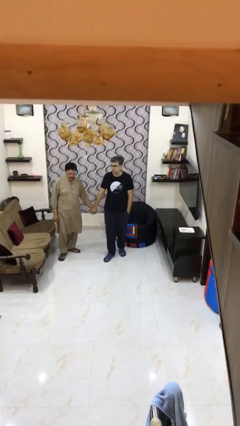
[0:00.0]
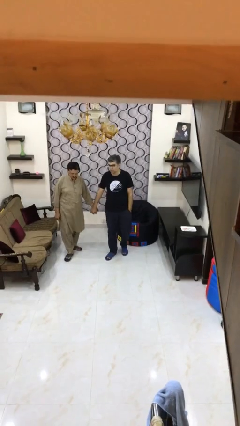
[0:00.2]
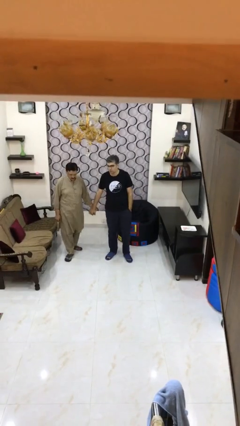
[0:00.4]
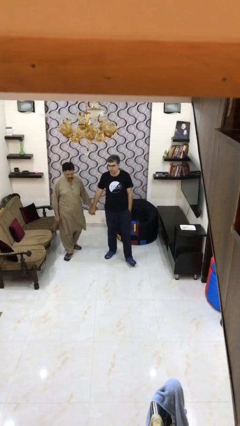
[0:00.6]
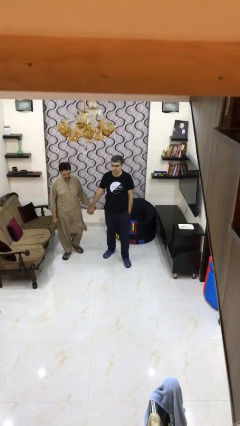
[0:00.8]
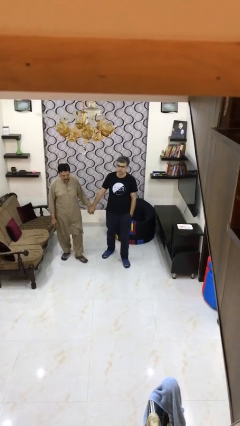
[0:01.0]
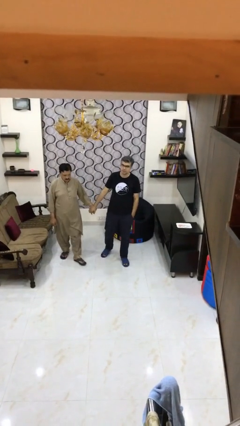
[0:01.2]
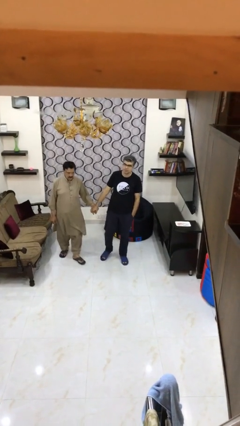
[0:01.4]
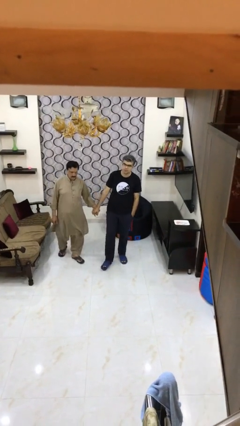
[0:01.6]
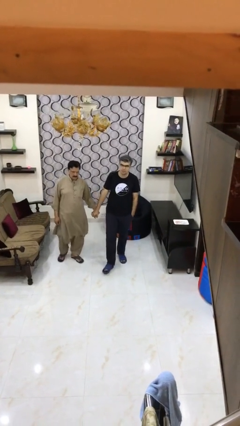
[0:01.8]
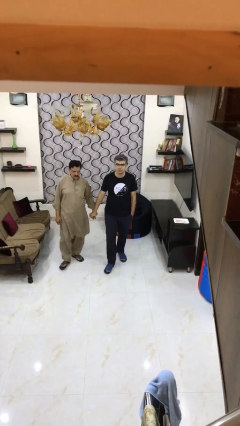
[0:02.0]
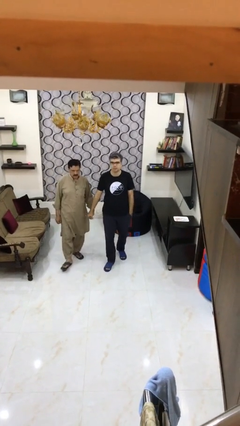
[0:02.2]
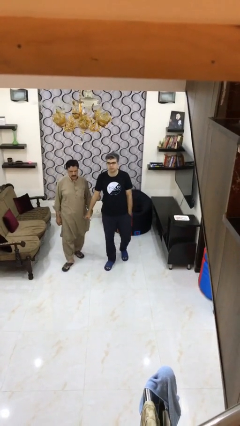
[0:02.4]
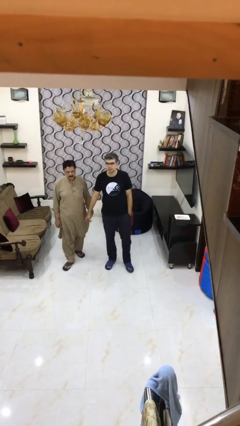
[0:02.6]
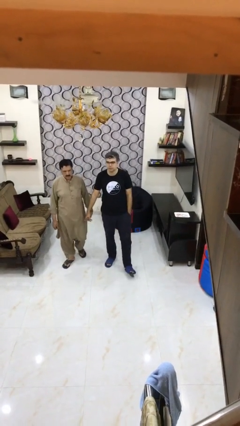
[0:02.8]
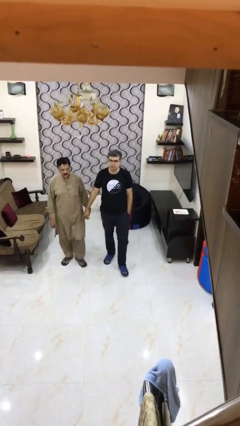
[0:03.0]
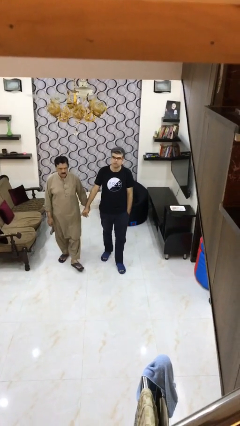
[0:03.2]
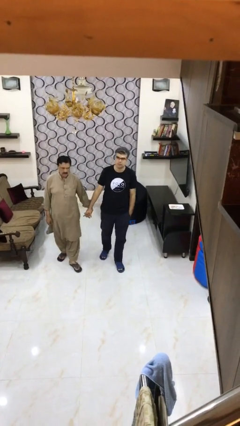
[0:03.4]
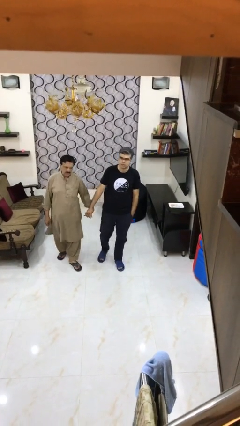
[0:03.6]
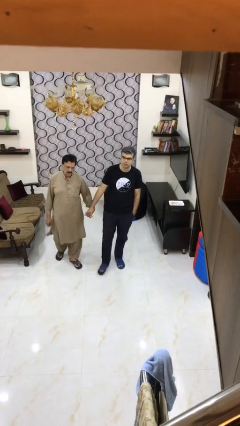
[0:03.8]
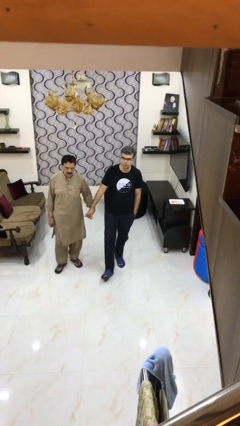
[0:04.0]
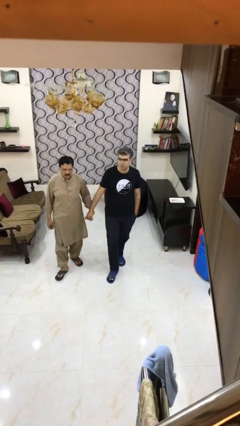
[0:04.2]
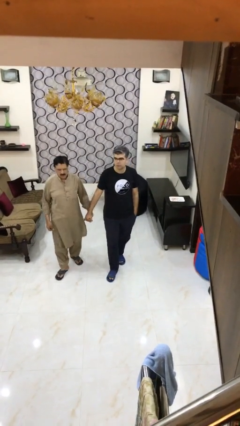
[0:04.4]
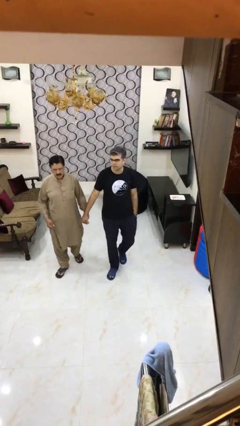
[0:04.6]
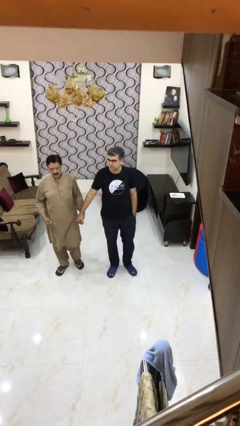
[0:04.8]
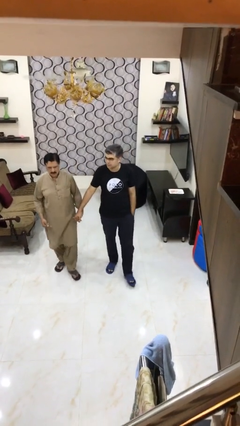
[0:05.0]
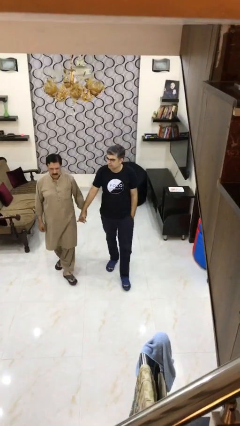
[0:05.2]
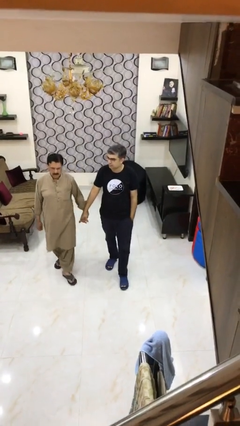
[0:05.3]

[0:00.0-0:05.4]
person holds hand

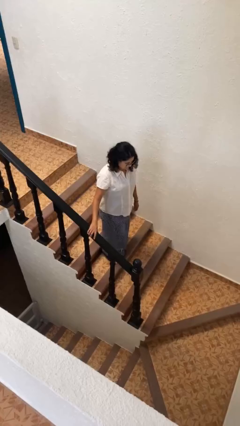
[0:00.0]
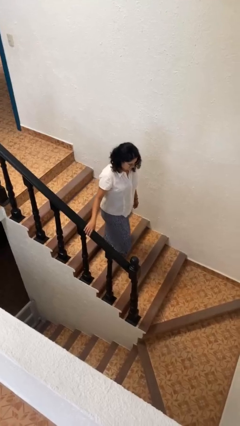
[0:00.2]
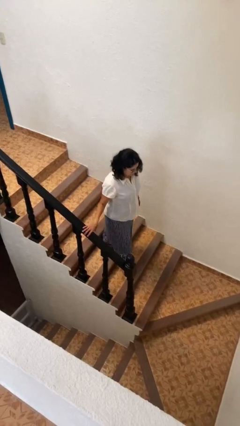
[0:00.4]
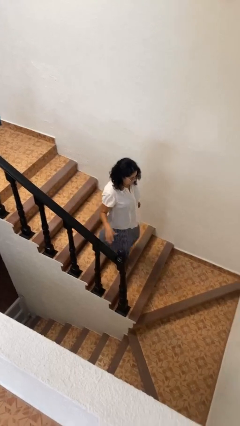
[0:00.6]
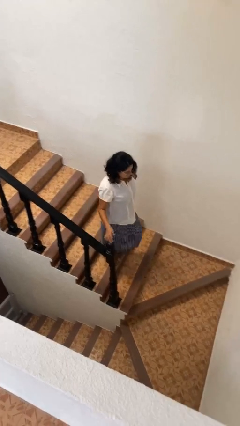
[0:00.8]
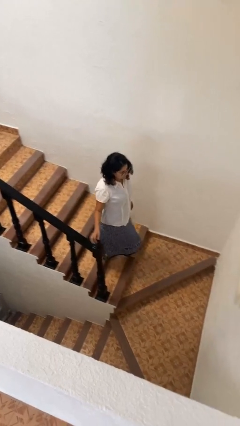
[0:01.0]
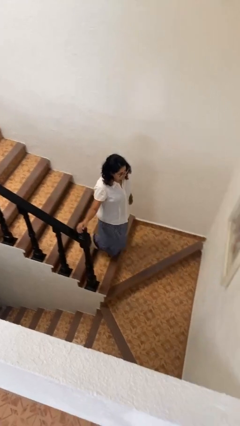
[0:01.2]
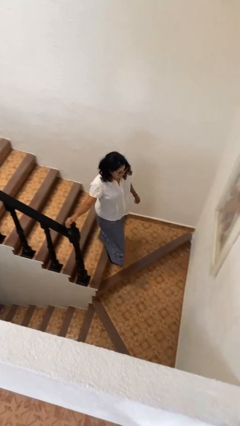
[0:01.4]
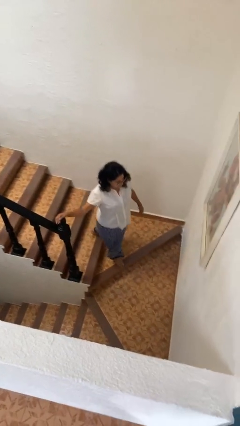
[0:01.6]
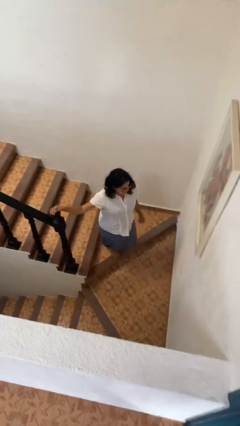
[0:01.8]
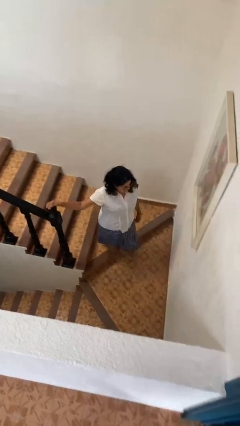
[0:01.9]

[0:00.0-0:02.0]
person climbs down stairs

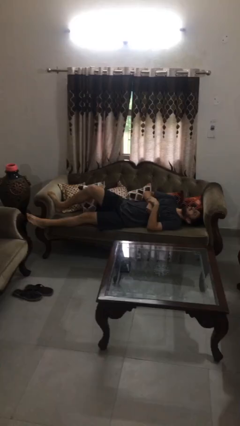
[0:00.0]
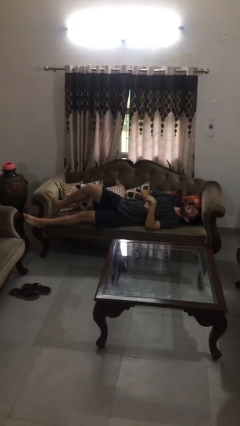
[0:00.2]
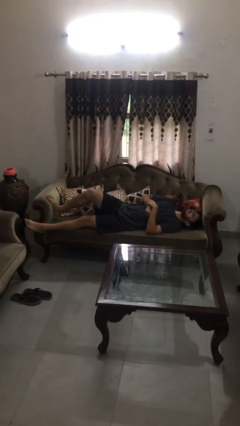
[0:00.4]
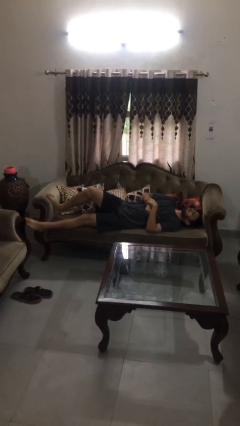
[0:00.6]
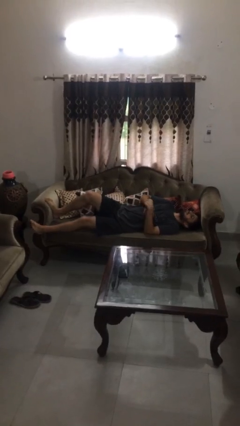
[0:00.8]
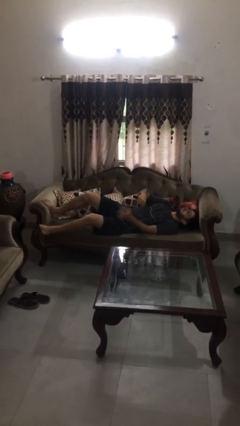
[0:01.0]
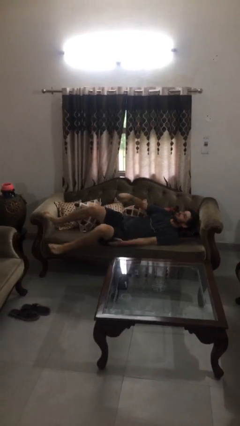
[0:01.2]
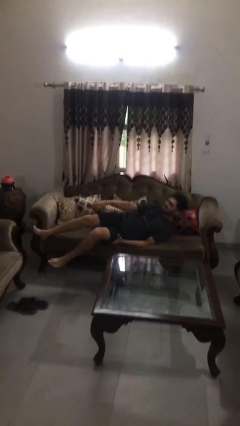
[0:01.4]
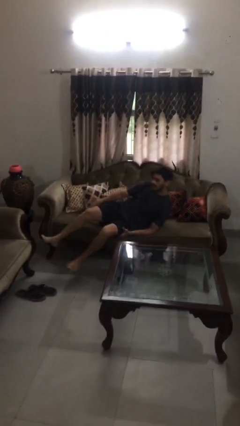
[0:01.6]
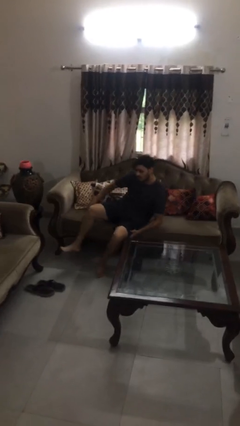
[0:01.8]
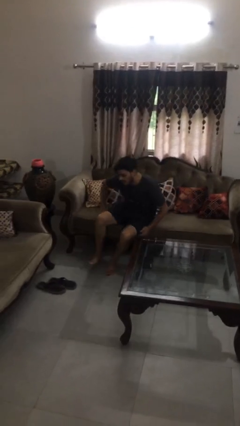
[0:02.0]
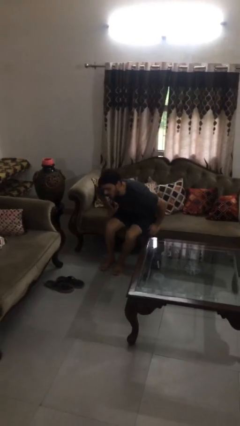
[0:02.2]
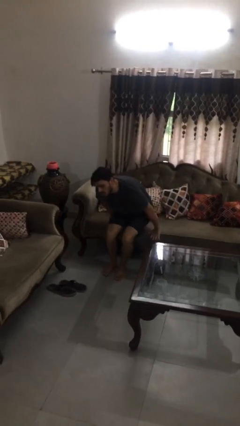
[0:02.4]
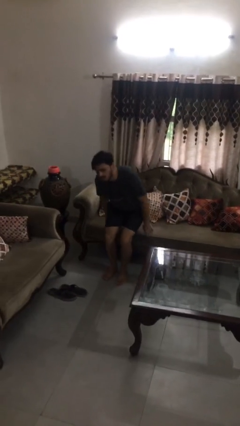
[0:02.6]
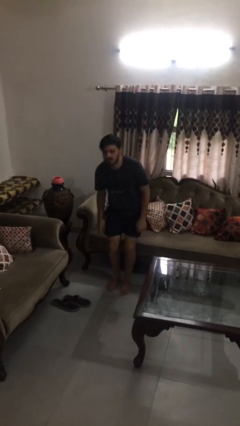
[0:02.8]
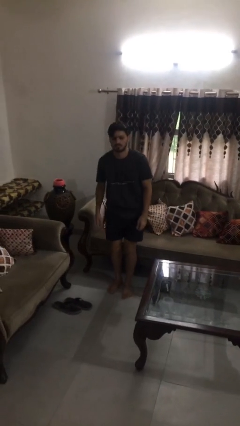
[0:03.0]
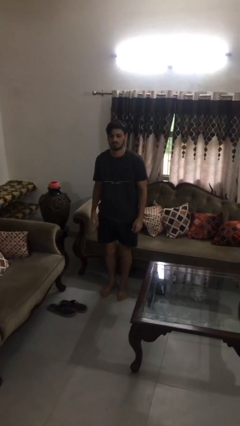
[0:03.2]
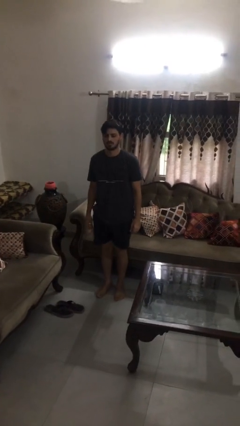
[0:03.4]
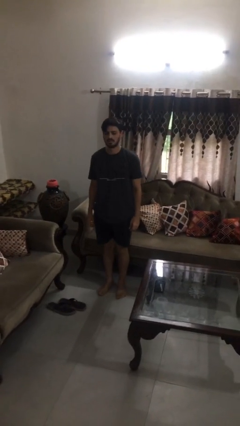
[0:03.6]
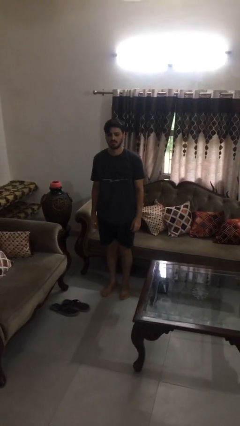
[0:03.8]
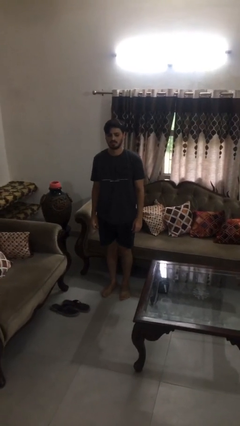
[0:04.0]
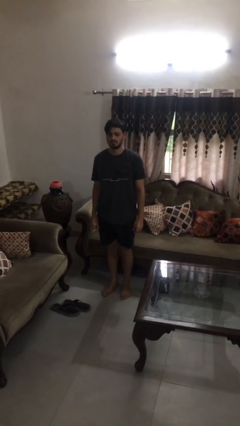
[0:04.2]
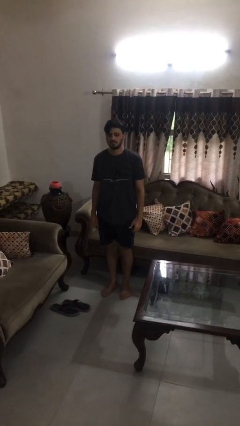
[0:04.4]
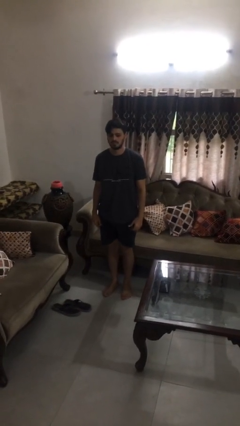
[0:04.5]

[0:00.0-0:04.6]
person stands up

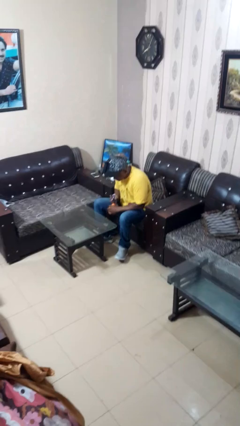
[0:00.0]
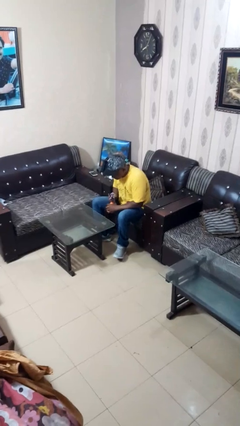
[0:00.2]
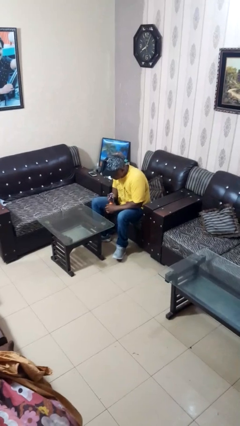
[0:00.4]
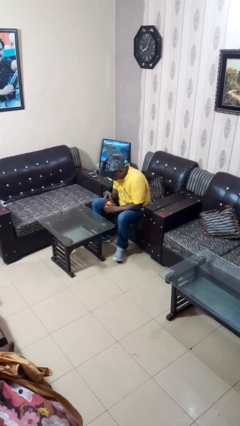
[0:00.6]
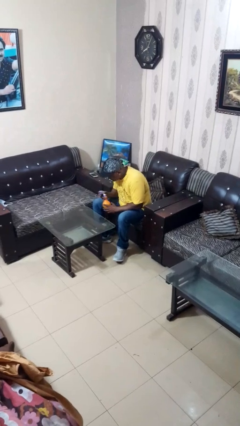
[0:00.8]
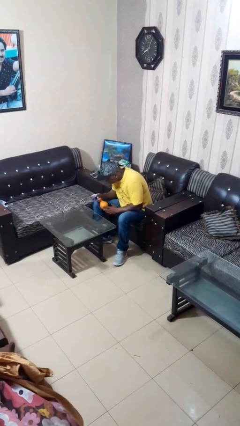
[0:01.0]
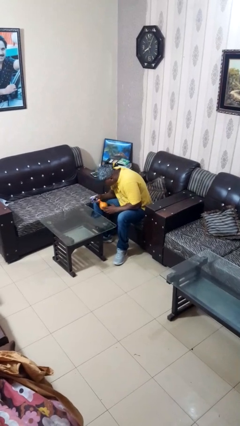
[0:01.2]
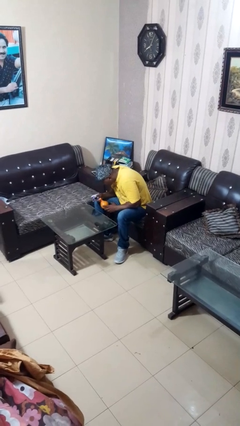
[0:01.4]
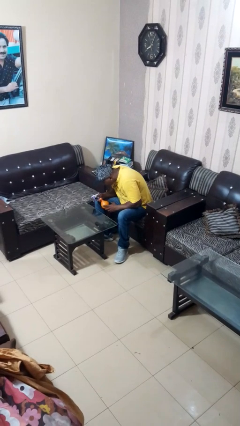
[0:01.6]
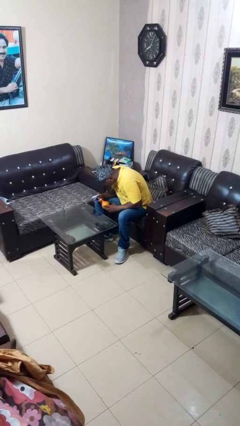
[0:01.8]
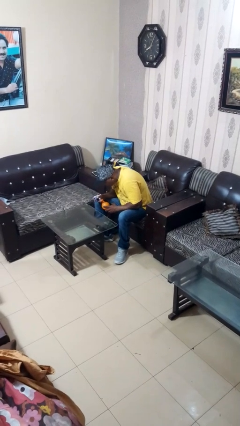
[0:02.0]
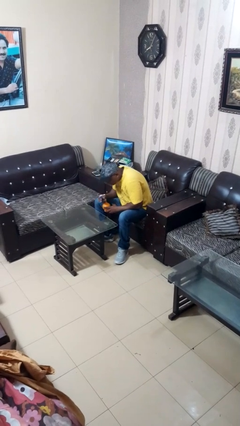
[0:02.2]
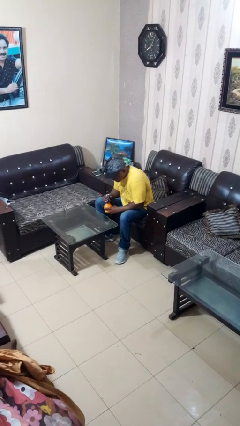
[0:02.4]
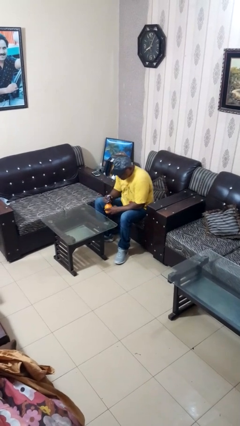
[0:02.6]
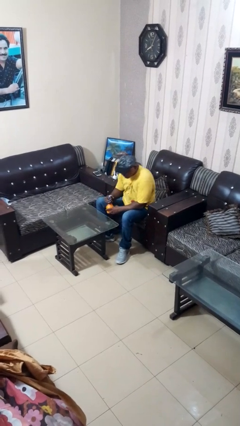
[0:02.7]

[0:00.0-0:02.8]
person sprays from bottle

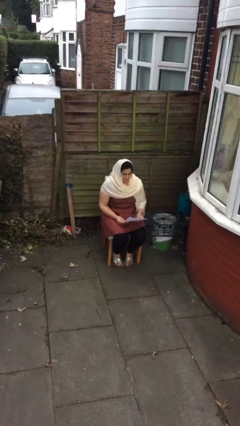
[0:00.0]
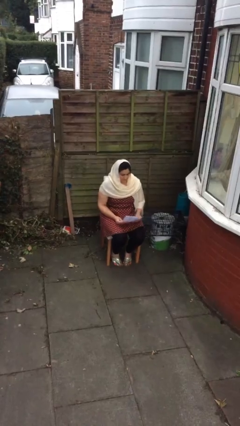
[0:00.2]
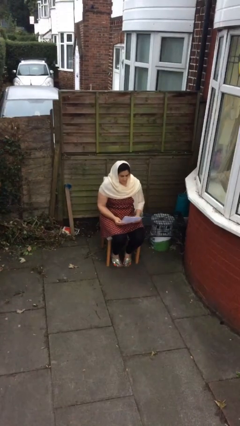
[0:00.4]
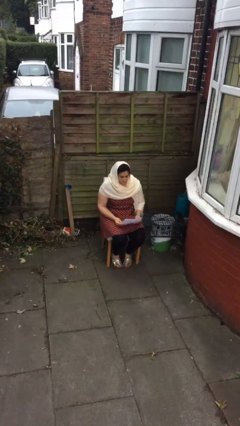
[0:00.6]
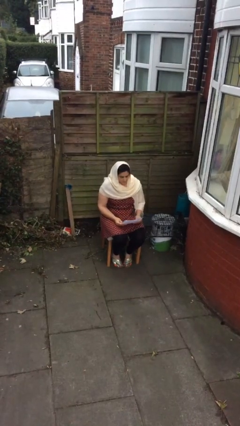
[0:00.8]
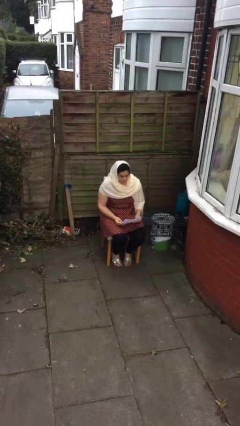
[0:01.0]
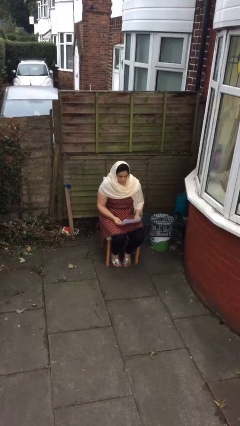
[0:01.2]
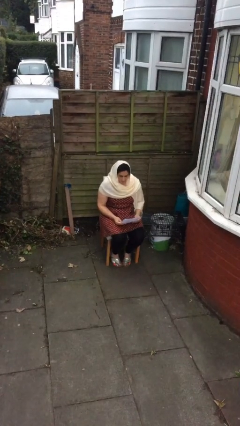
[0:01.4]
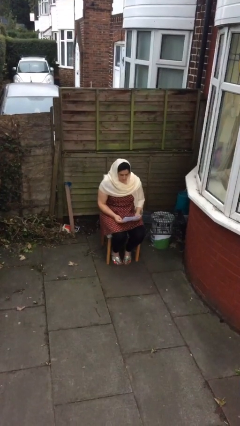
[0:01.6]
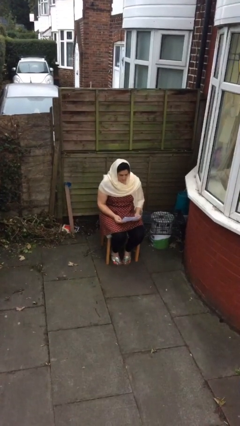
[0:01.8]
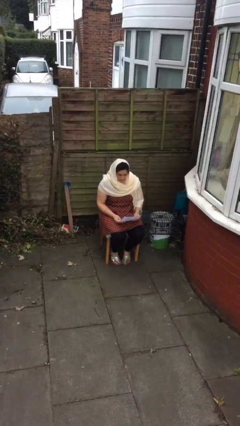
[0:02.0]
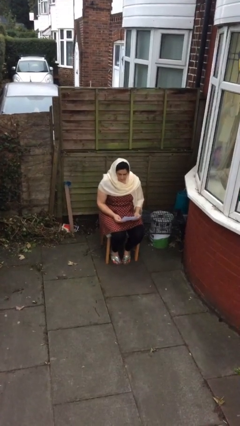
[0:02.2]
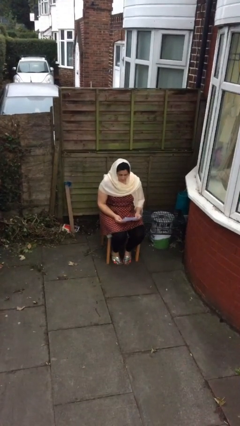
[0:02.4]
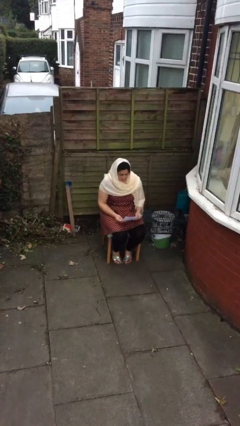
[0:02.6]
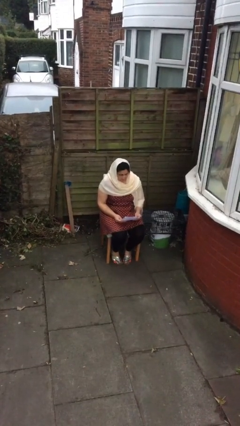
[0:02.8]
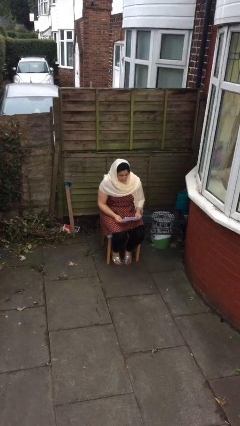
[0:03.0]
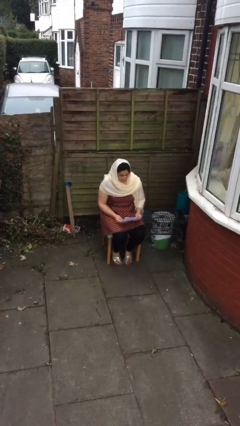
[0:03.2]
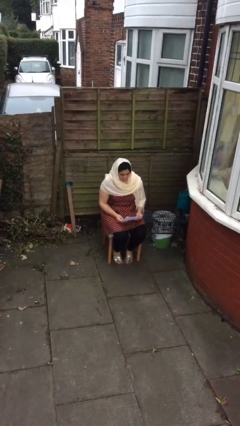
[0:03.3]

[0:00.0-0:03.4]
person reads document
